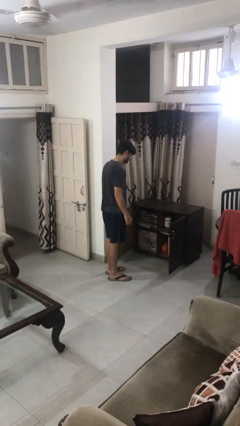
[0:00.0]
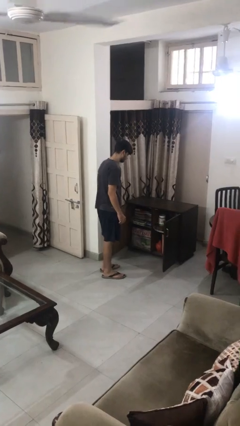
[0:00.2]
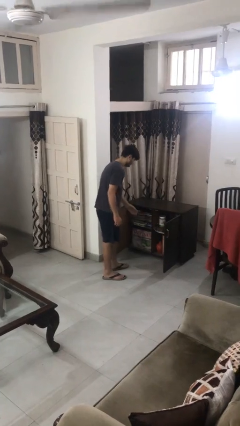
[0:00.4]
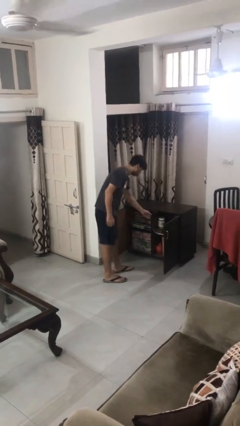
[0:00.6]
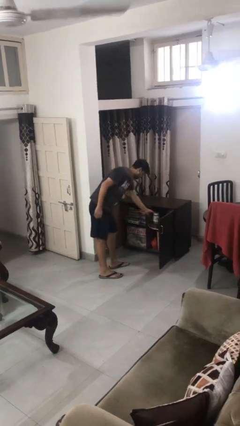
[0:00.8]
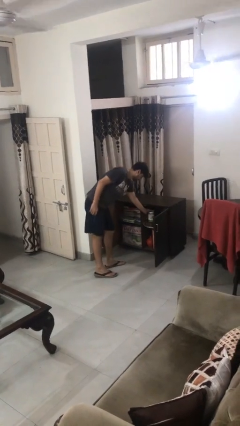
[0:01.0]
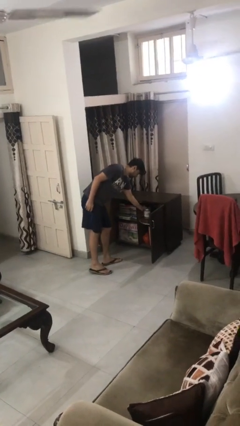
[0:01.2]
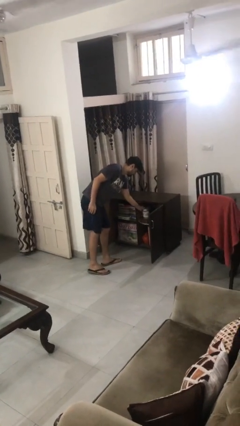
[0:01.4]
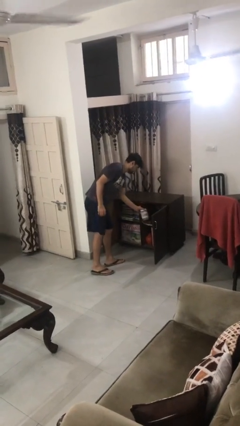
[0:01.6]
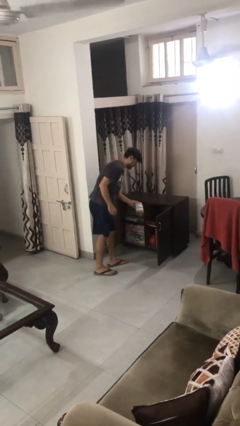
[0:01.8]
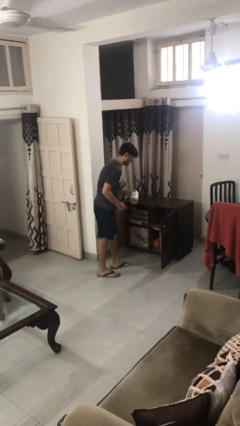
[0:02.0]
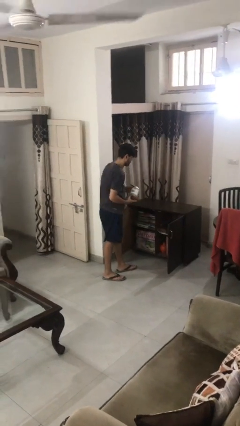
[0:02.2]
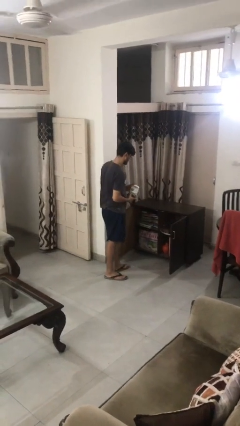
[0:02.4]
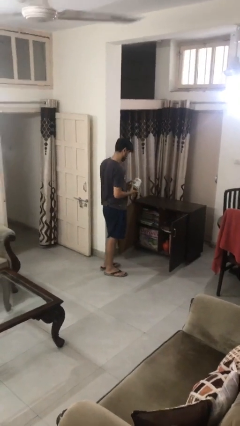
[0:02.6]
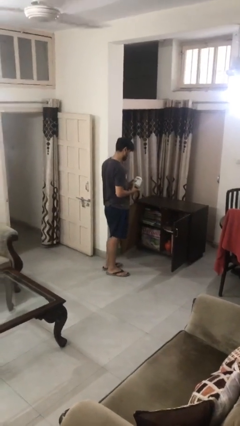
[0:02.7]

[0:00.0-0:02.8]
person picks up object from cabinet

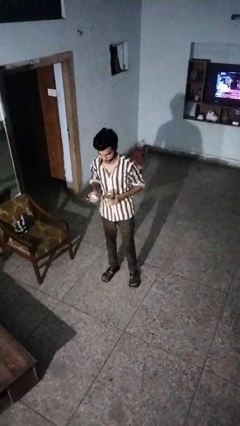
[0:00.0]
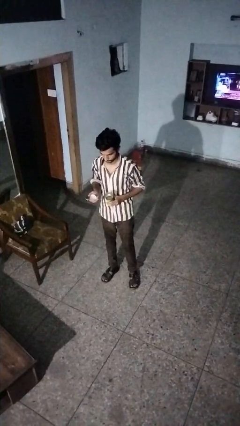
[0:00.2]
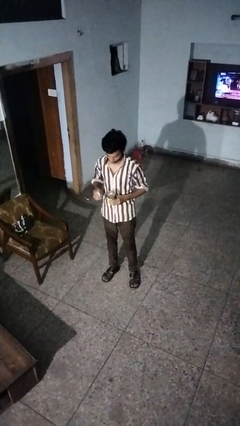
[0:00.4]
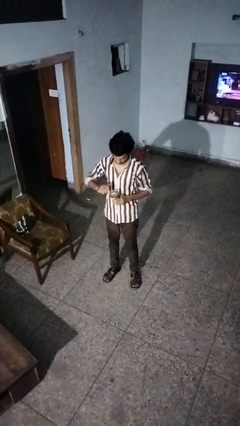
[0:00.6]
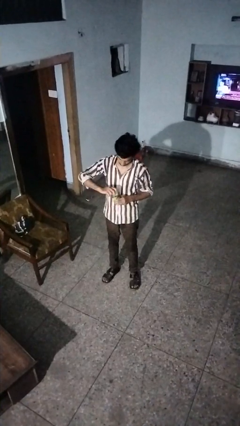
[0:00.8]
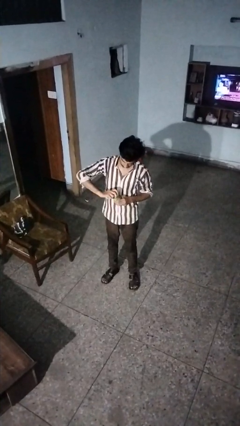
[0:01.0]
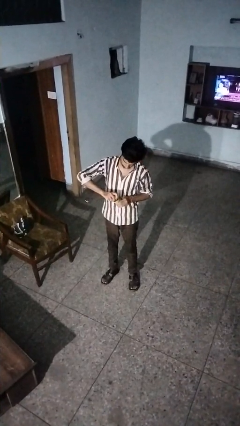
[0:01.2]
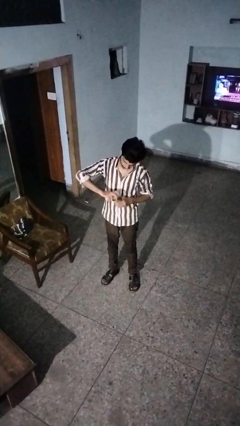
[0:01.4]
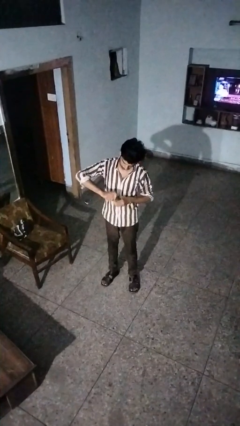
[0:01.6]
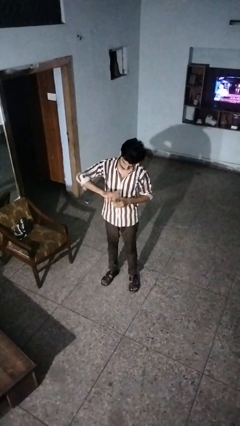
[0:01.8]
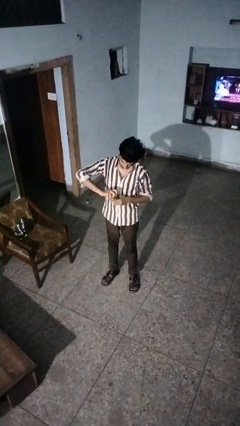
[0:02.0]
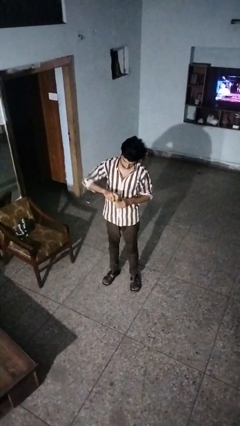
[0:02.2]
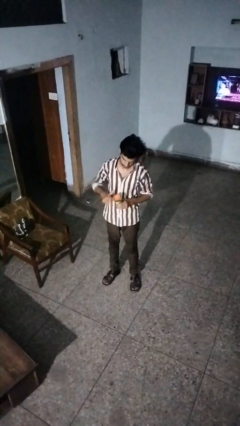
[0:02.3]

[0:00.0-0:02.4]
person closes jar

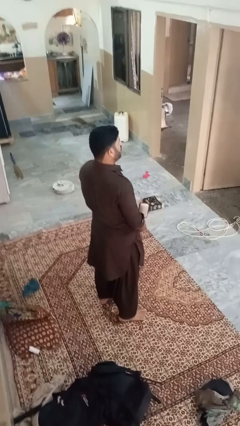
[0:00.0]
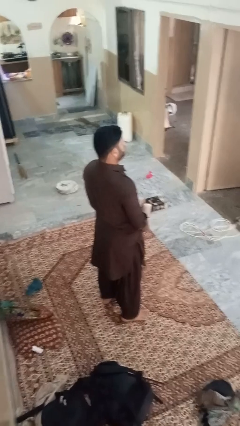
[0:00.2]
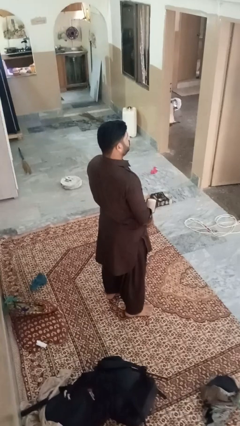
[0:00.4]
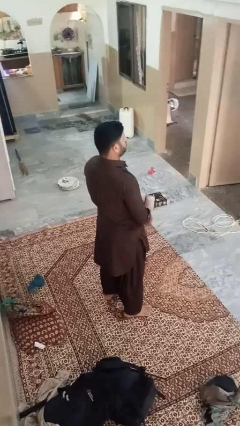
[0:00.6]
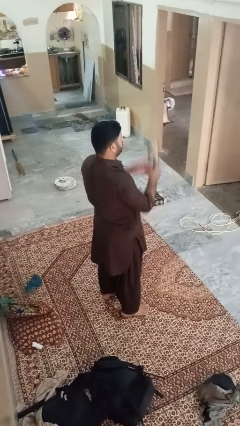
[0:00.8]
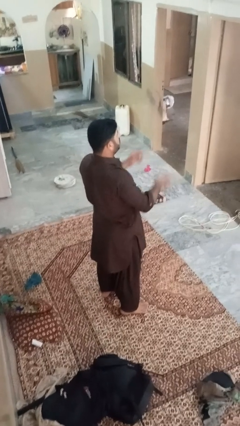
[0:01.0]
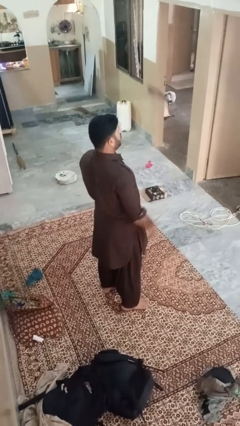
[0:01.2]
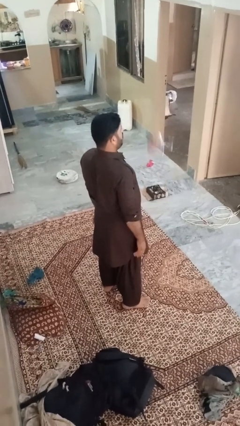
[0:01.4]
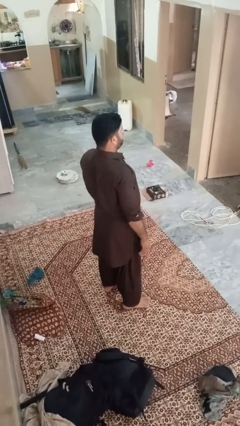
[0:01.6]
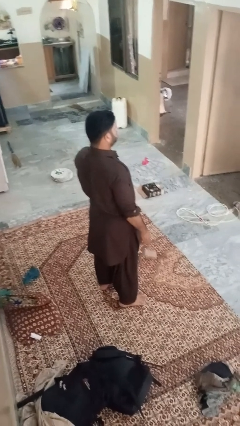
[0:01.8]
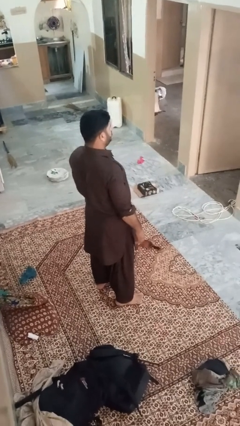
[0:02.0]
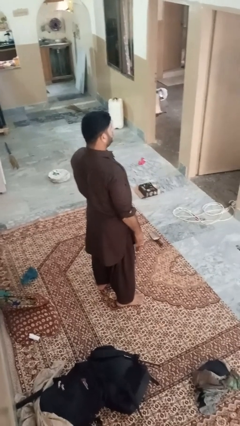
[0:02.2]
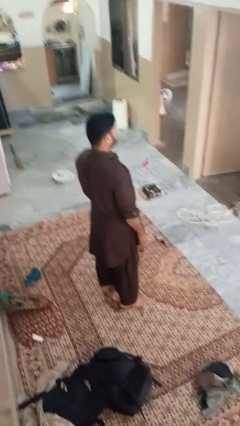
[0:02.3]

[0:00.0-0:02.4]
person throws object into air

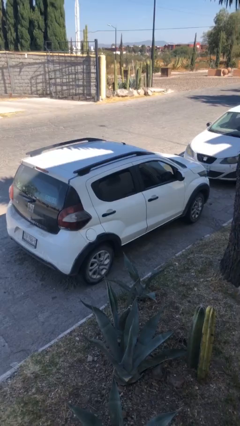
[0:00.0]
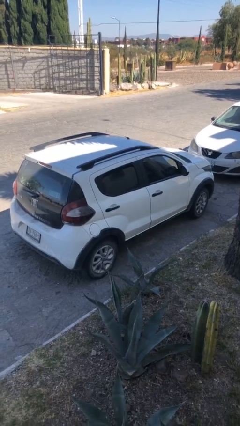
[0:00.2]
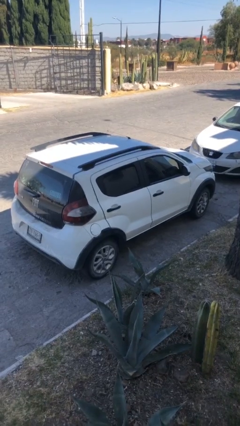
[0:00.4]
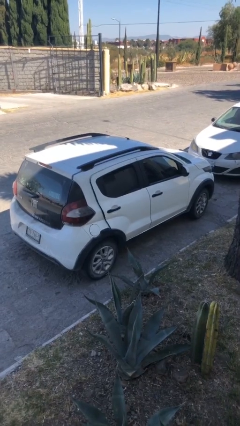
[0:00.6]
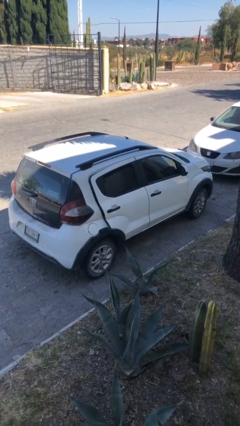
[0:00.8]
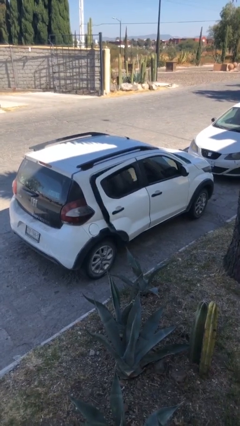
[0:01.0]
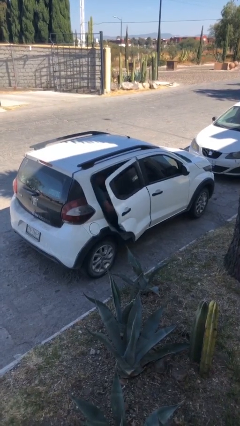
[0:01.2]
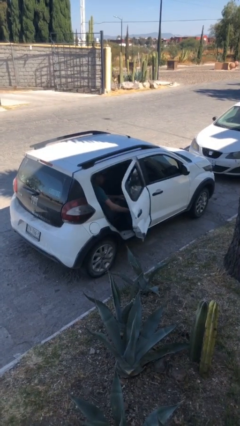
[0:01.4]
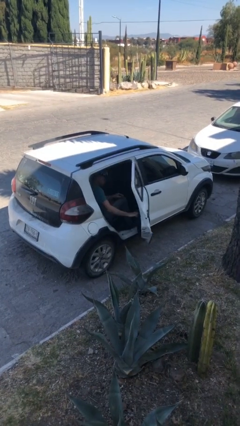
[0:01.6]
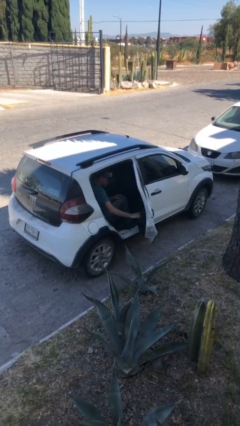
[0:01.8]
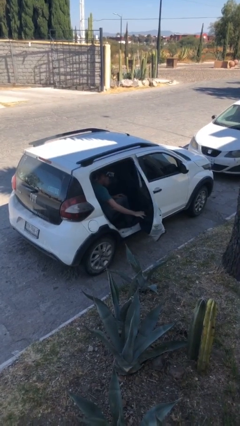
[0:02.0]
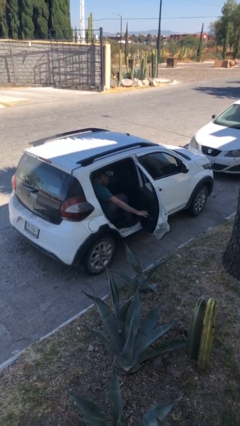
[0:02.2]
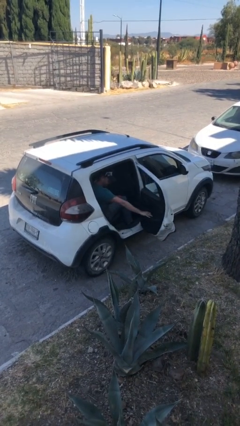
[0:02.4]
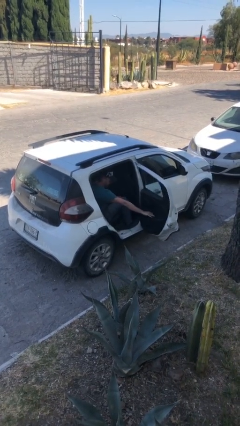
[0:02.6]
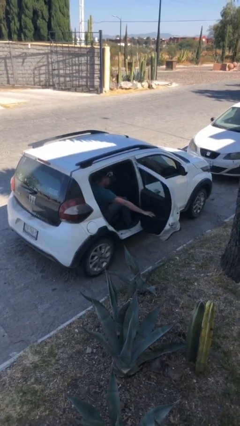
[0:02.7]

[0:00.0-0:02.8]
person opens car door

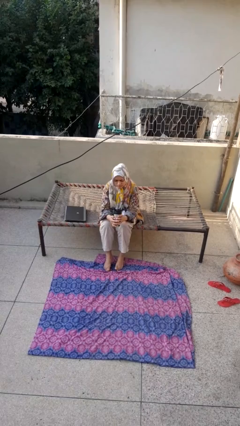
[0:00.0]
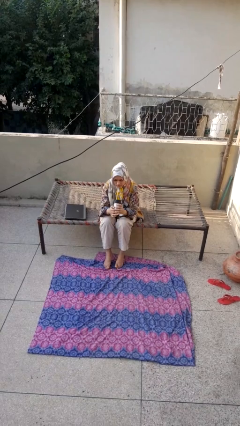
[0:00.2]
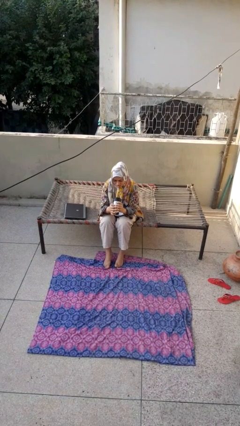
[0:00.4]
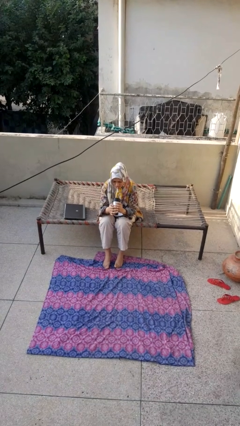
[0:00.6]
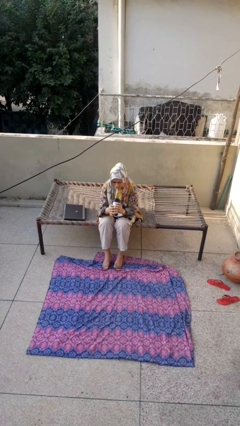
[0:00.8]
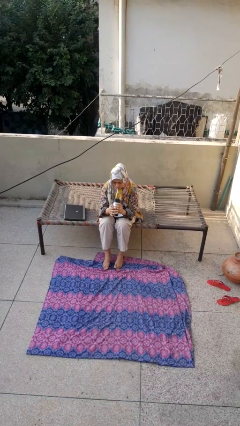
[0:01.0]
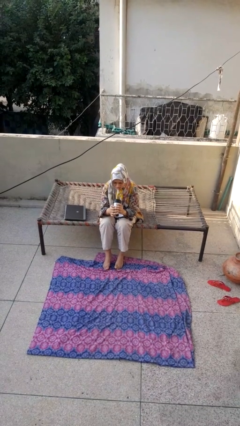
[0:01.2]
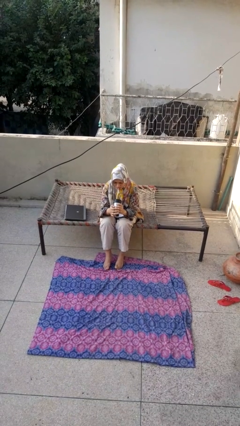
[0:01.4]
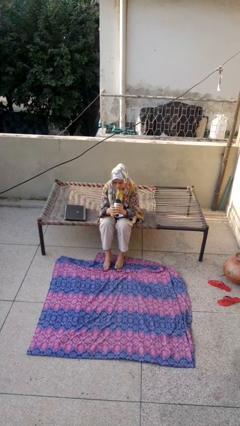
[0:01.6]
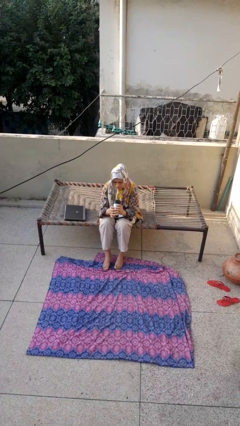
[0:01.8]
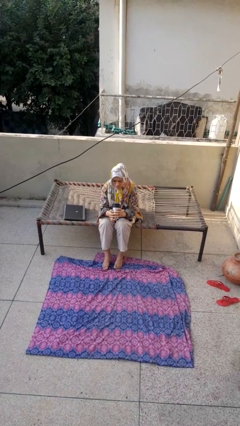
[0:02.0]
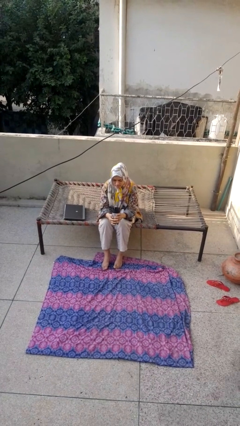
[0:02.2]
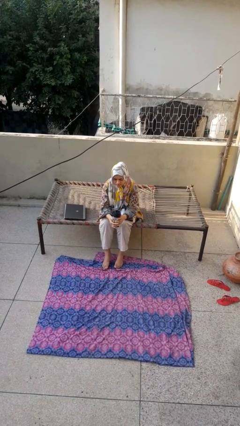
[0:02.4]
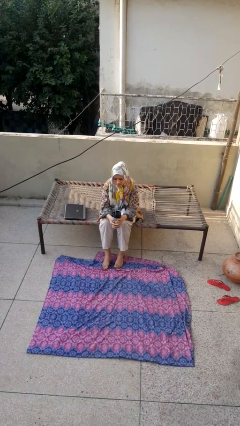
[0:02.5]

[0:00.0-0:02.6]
person drinks from straw

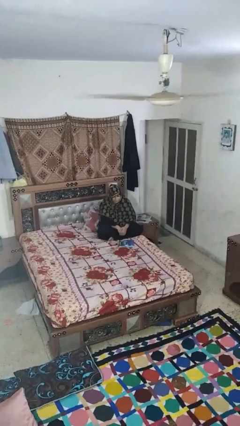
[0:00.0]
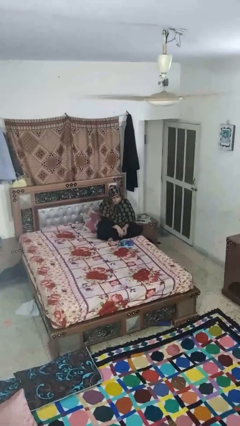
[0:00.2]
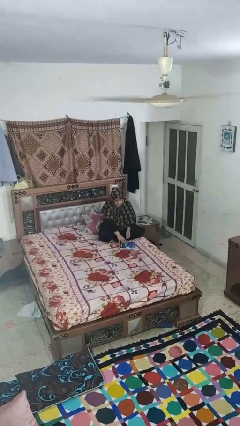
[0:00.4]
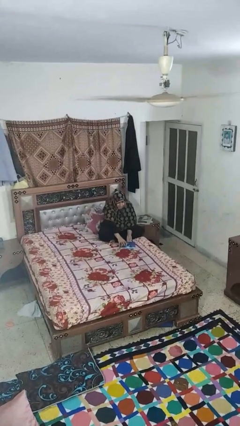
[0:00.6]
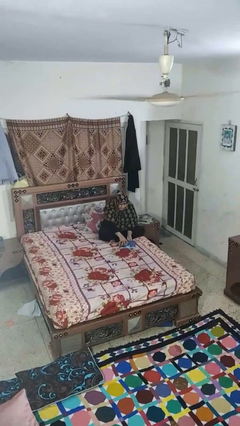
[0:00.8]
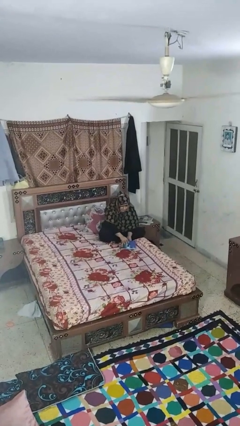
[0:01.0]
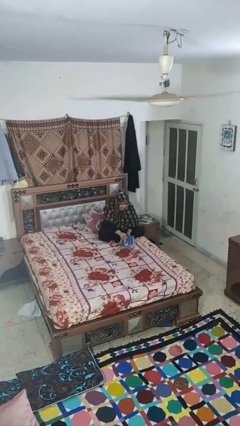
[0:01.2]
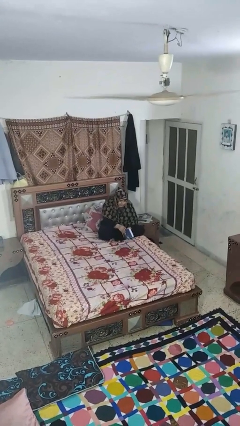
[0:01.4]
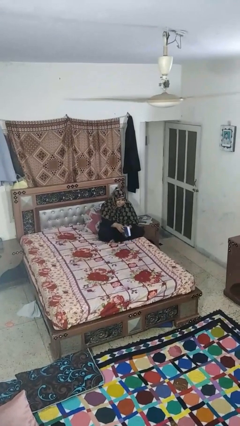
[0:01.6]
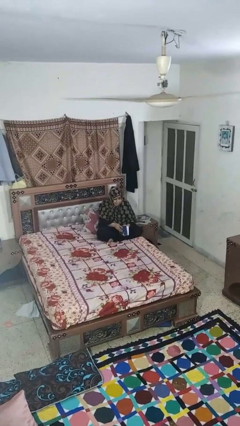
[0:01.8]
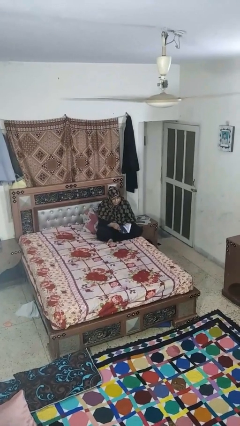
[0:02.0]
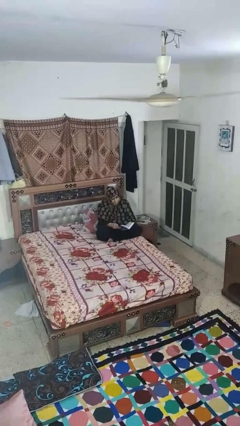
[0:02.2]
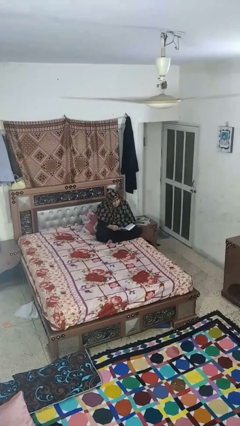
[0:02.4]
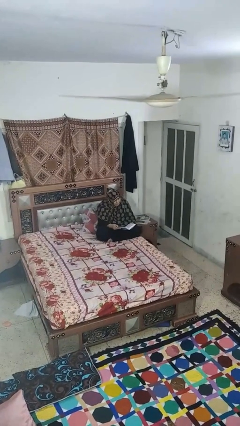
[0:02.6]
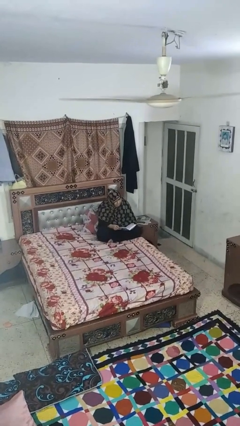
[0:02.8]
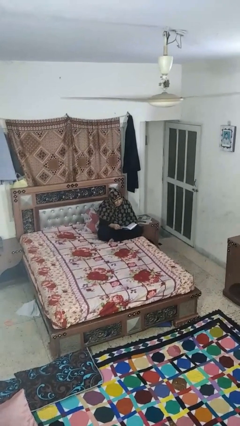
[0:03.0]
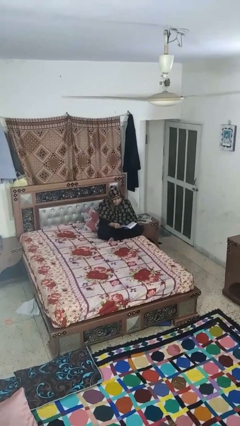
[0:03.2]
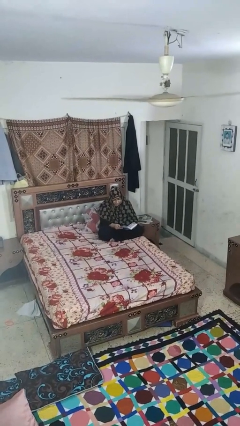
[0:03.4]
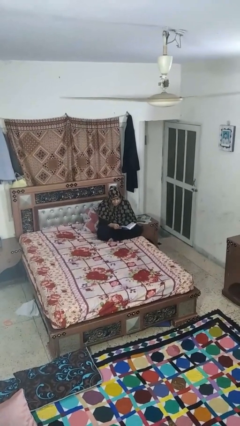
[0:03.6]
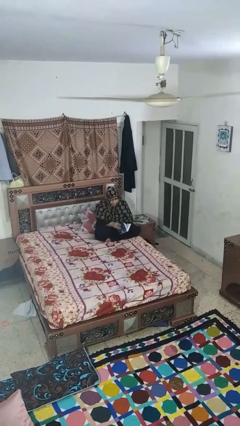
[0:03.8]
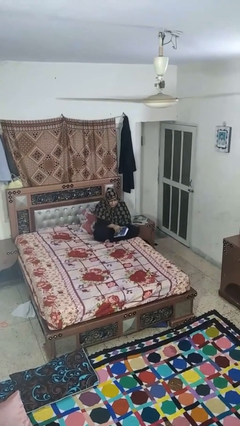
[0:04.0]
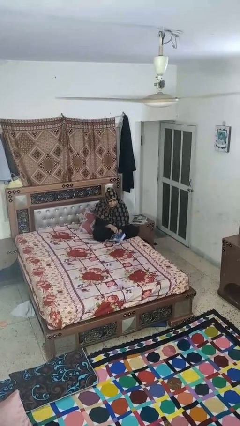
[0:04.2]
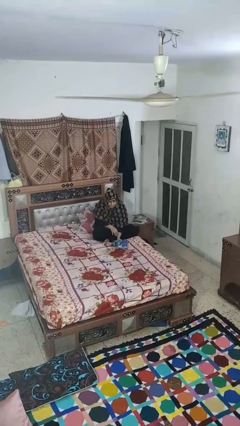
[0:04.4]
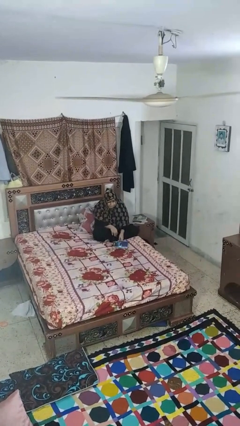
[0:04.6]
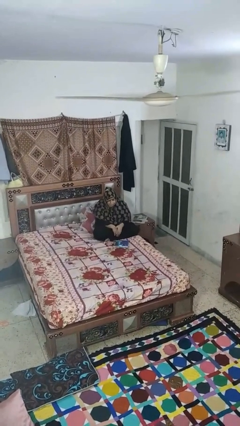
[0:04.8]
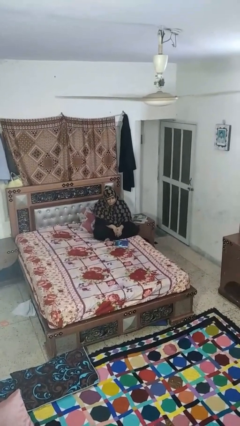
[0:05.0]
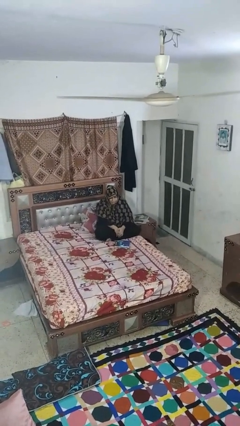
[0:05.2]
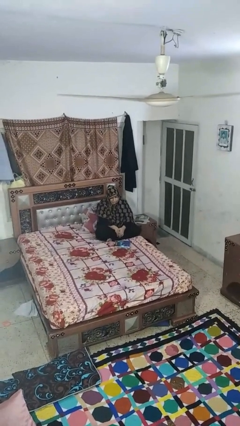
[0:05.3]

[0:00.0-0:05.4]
person reads book
